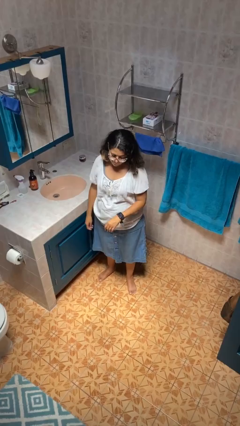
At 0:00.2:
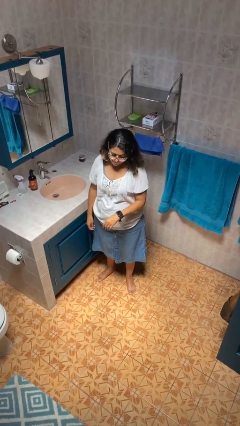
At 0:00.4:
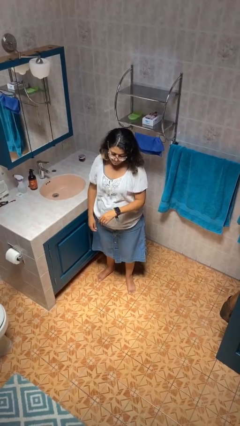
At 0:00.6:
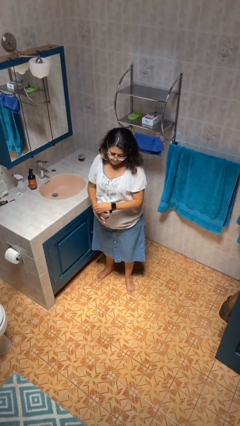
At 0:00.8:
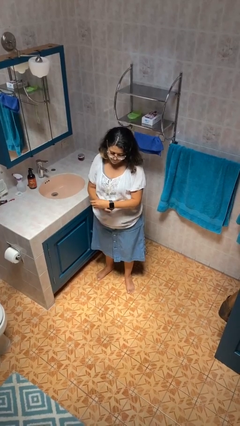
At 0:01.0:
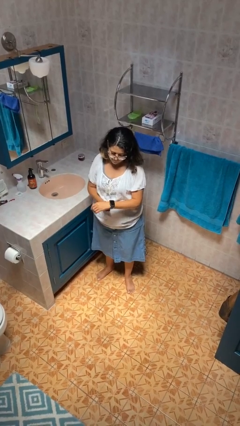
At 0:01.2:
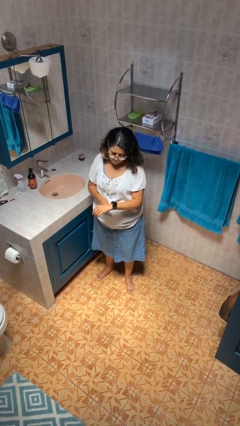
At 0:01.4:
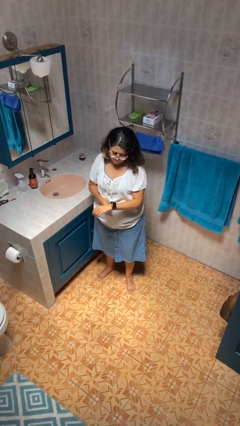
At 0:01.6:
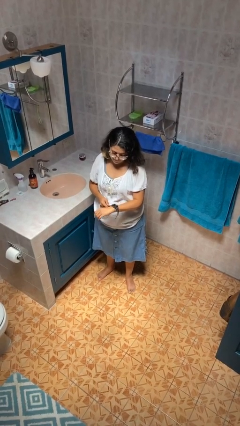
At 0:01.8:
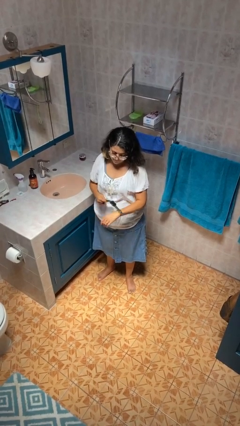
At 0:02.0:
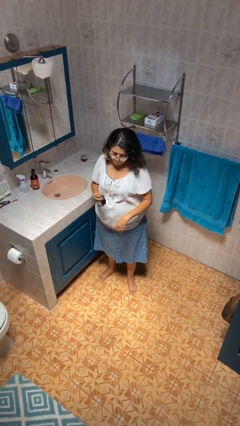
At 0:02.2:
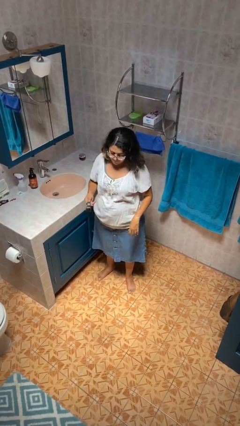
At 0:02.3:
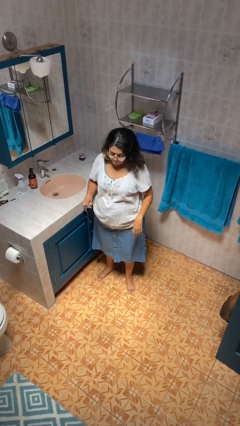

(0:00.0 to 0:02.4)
person takes off wristwatch

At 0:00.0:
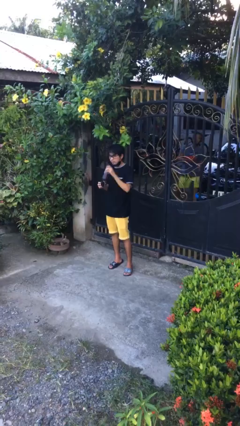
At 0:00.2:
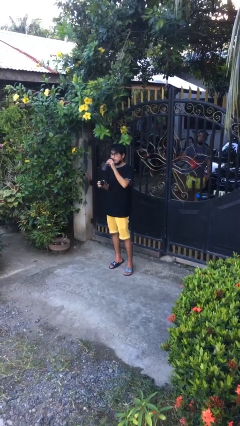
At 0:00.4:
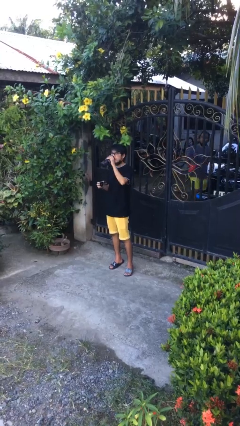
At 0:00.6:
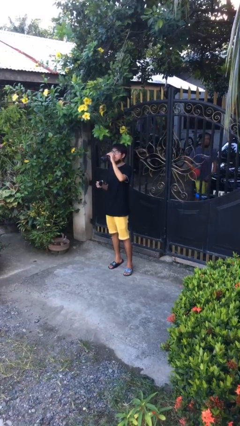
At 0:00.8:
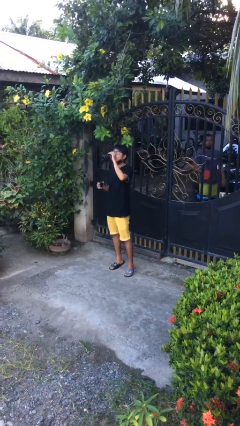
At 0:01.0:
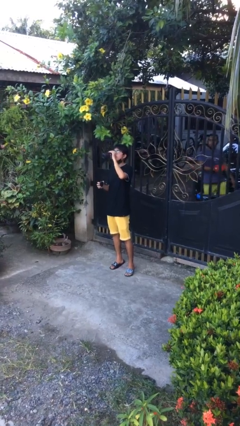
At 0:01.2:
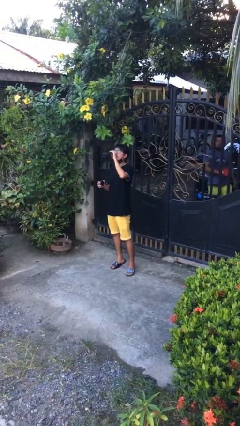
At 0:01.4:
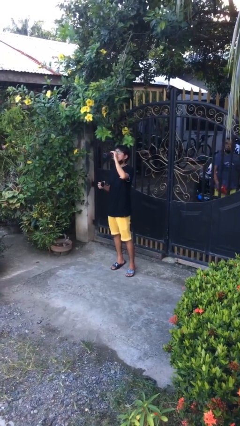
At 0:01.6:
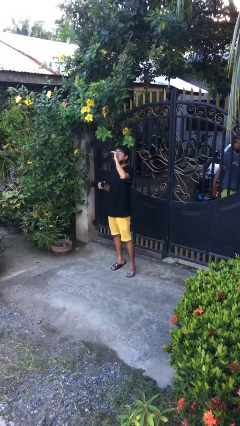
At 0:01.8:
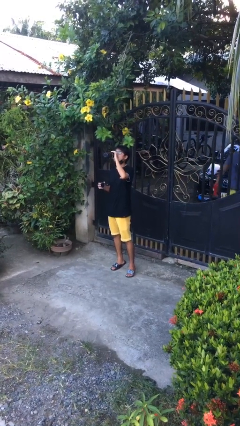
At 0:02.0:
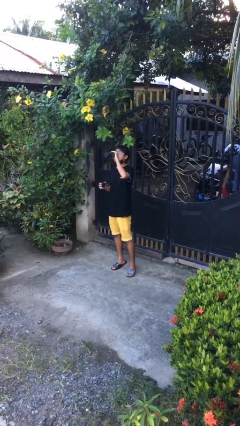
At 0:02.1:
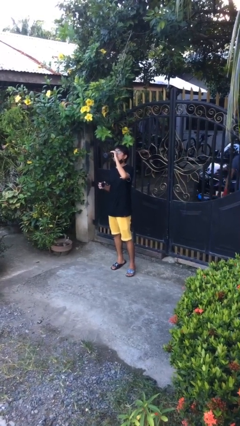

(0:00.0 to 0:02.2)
person drinks from bottle

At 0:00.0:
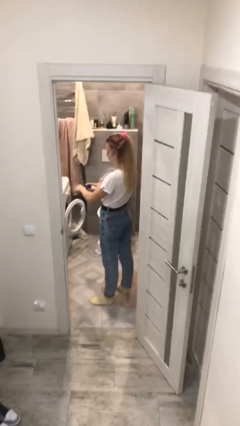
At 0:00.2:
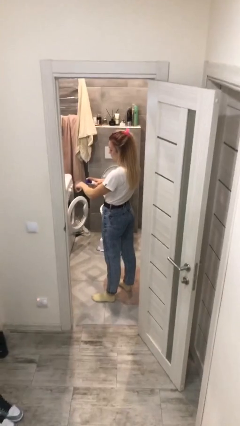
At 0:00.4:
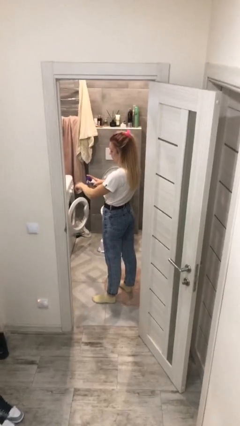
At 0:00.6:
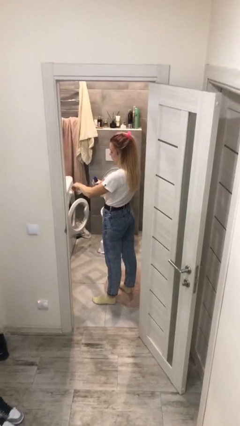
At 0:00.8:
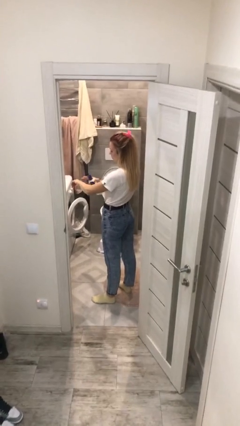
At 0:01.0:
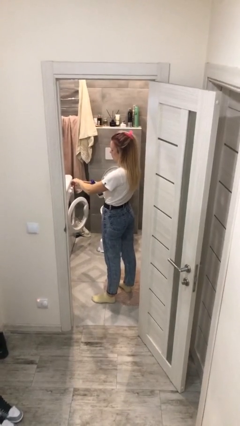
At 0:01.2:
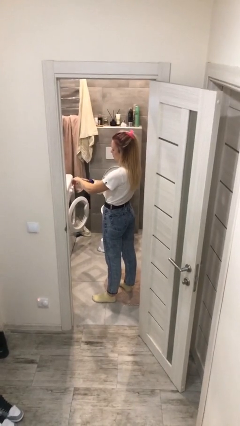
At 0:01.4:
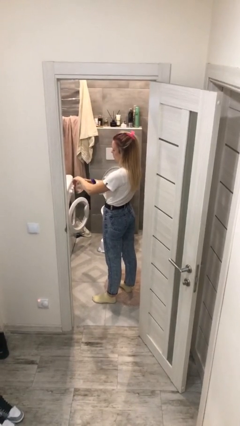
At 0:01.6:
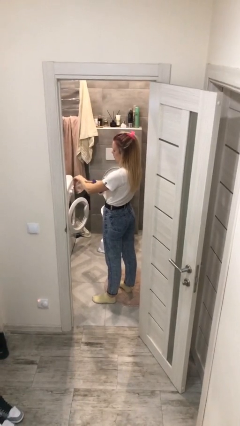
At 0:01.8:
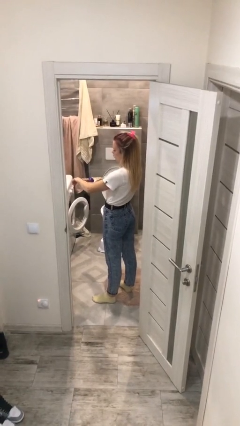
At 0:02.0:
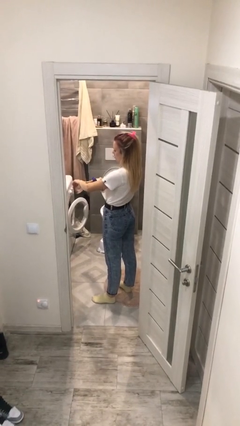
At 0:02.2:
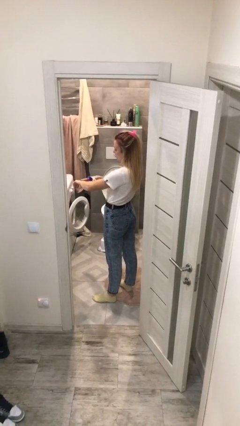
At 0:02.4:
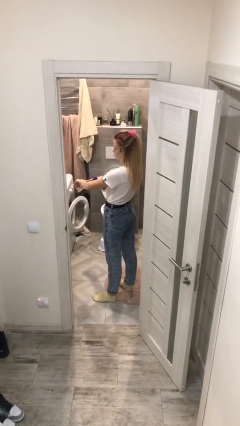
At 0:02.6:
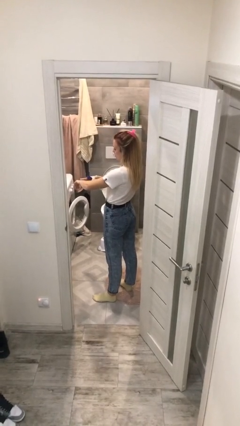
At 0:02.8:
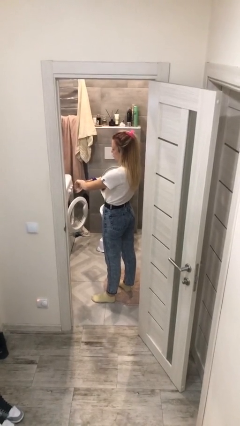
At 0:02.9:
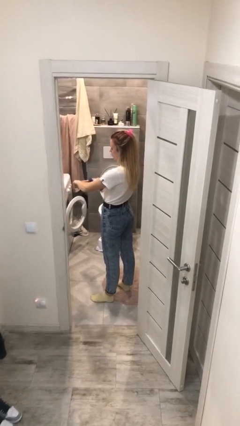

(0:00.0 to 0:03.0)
person applies sunscreen

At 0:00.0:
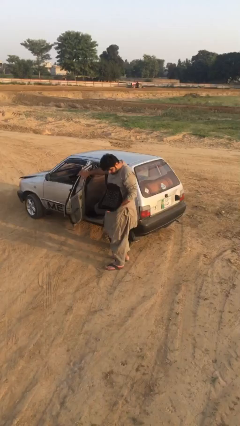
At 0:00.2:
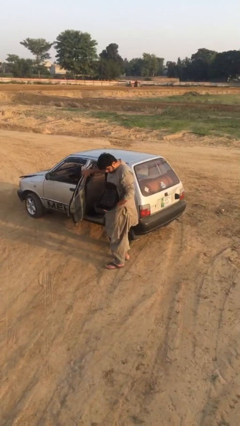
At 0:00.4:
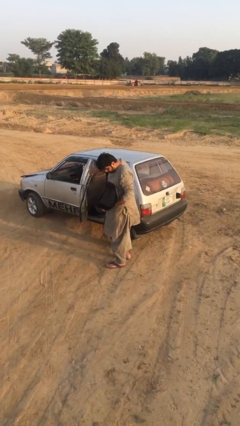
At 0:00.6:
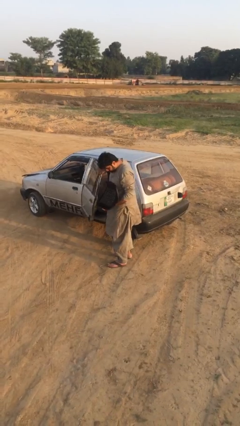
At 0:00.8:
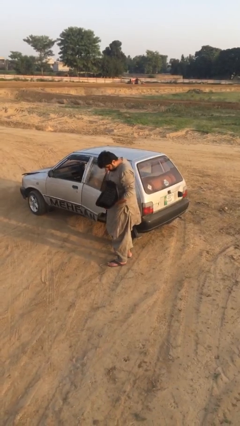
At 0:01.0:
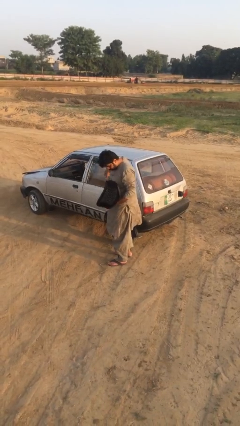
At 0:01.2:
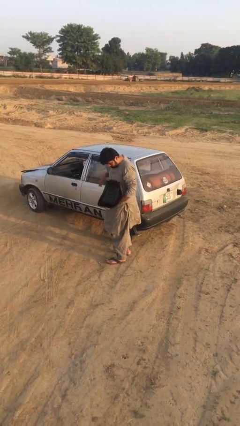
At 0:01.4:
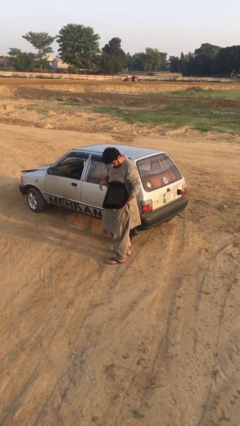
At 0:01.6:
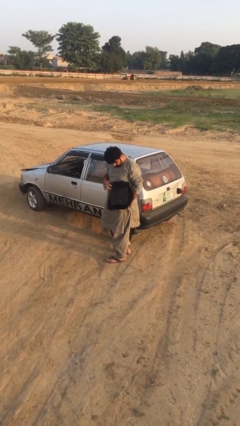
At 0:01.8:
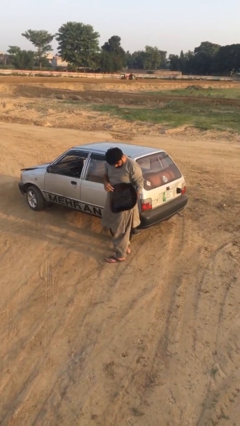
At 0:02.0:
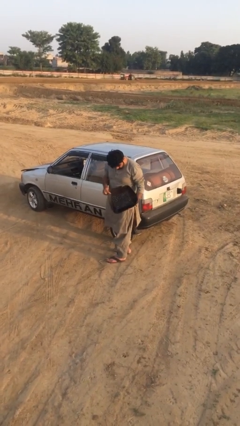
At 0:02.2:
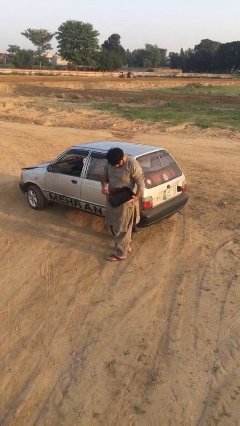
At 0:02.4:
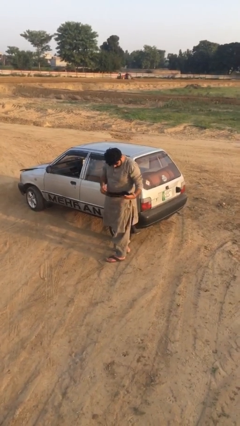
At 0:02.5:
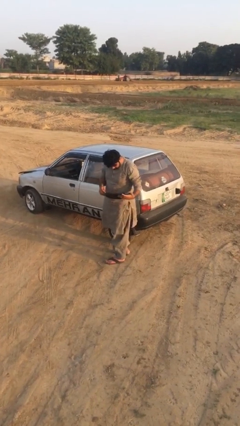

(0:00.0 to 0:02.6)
person closes car door

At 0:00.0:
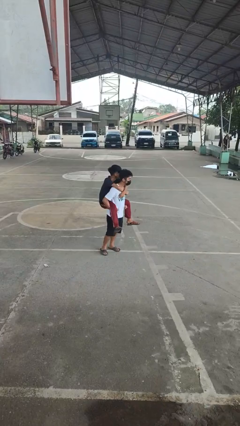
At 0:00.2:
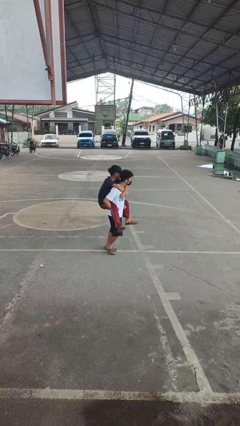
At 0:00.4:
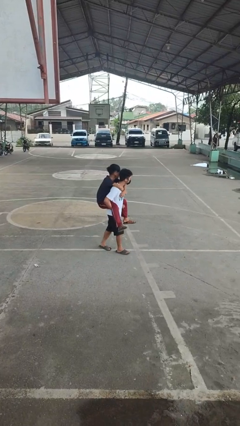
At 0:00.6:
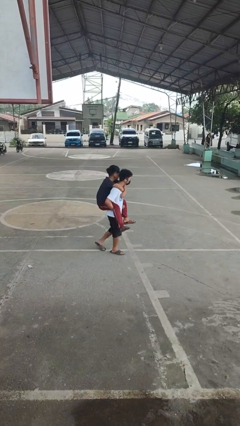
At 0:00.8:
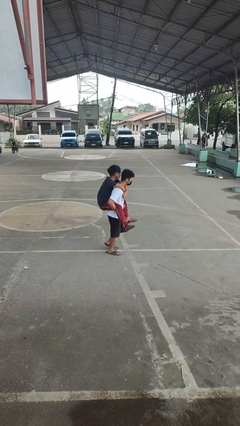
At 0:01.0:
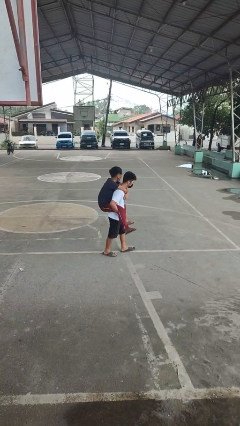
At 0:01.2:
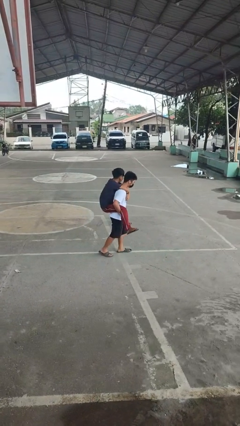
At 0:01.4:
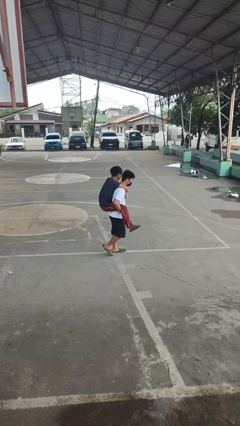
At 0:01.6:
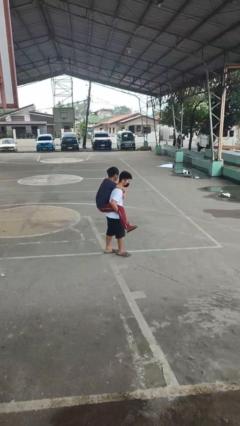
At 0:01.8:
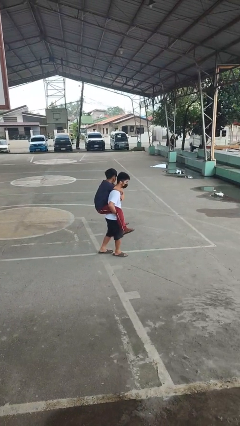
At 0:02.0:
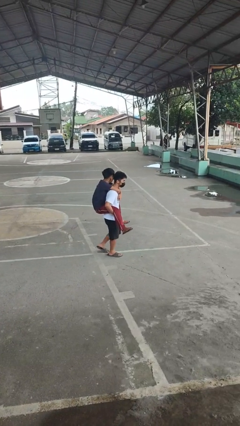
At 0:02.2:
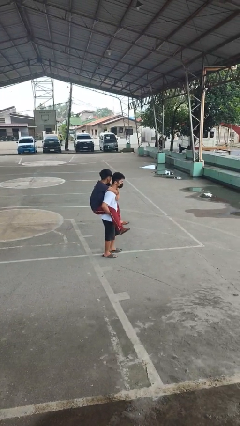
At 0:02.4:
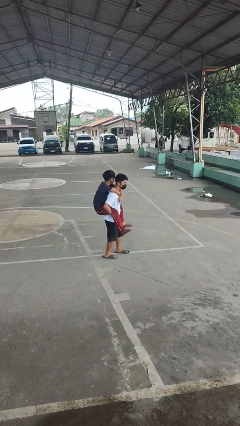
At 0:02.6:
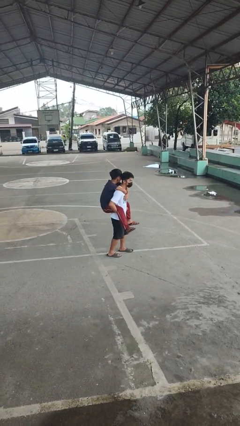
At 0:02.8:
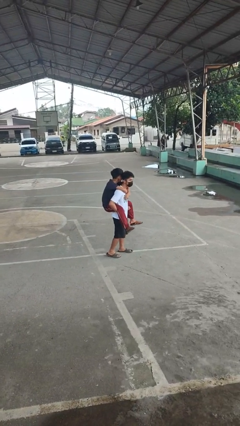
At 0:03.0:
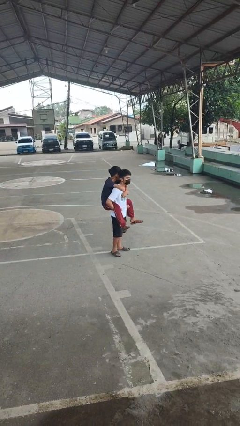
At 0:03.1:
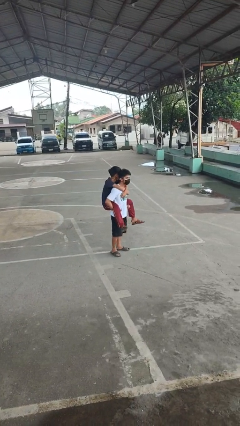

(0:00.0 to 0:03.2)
person carries person on back

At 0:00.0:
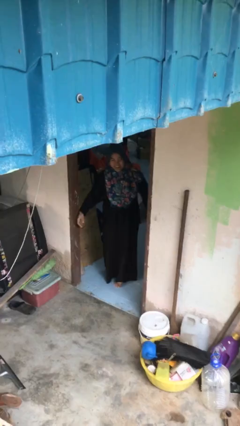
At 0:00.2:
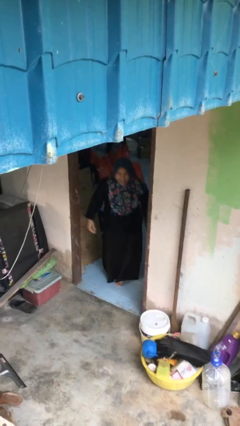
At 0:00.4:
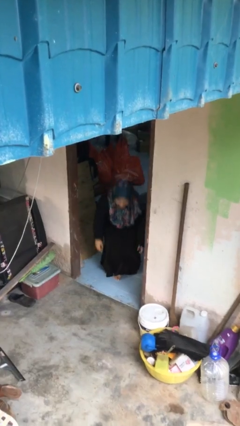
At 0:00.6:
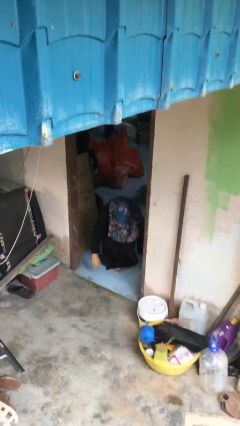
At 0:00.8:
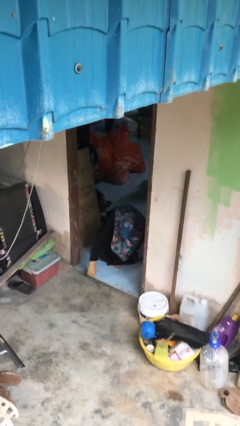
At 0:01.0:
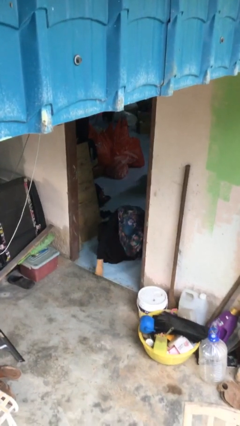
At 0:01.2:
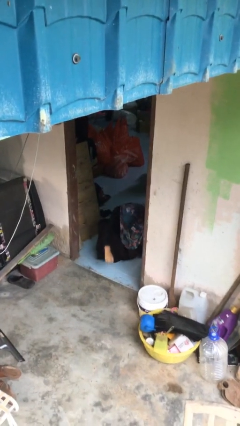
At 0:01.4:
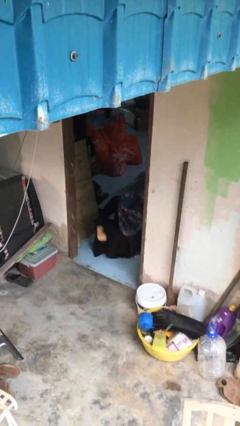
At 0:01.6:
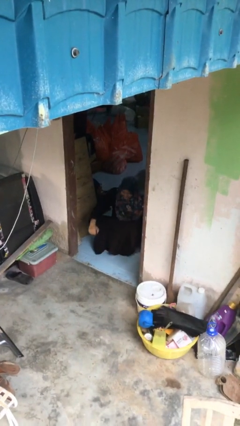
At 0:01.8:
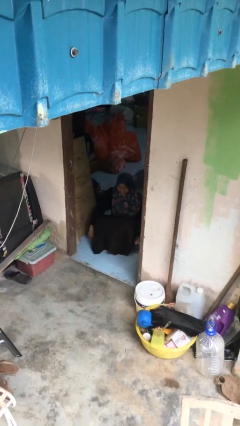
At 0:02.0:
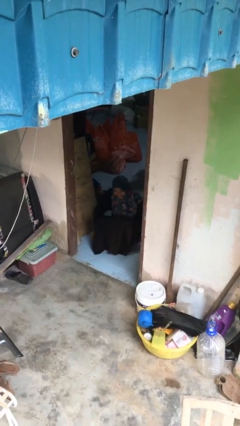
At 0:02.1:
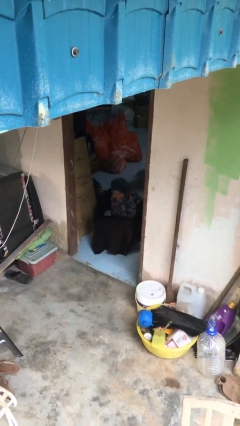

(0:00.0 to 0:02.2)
person sits down

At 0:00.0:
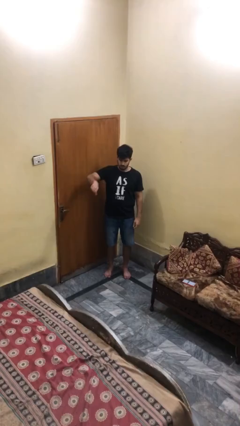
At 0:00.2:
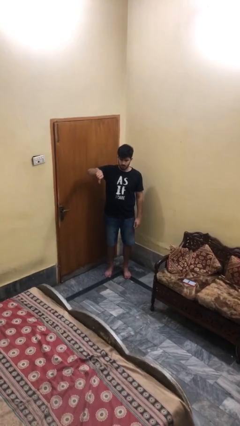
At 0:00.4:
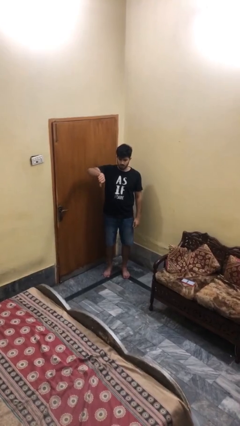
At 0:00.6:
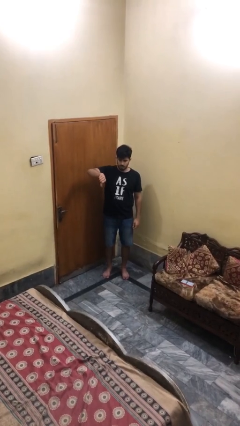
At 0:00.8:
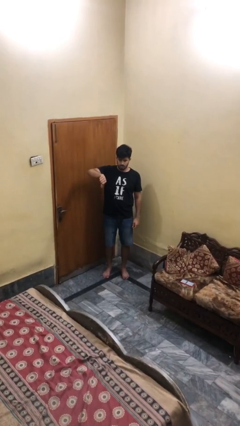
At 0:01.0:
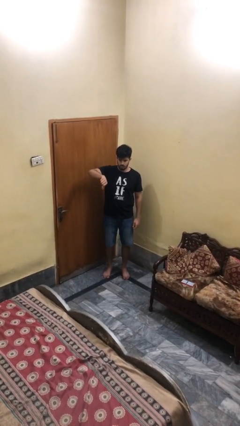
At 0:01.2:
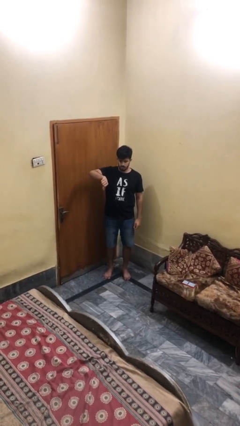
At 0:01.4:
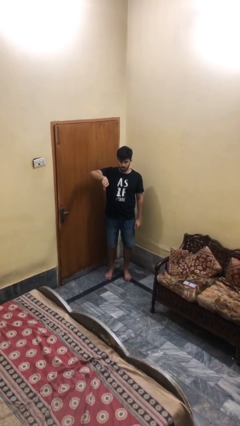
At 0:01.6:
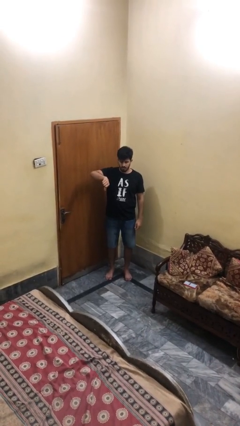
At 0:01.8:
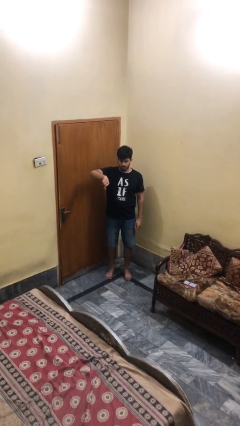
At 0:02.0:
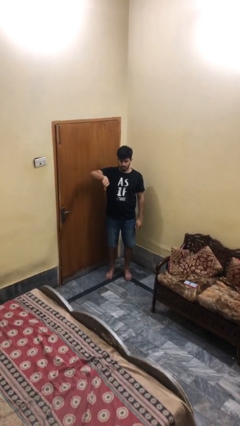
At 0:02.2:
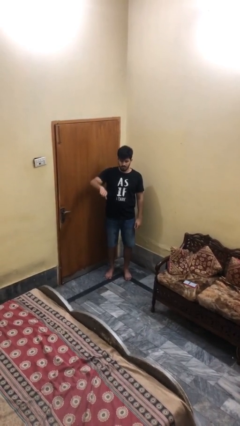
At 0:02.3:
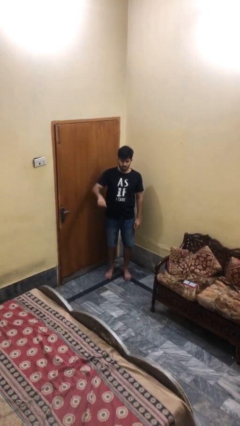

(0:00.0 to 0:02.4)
person gestures thumbs down
